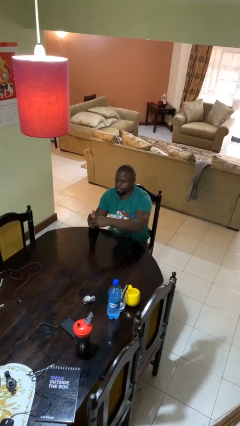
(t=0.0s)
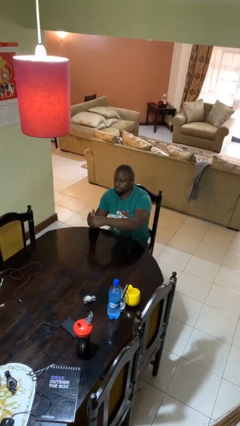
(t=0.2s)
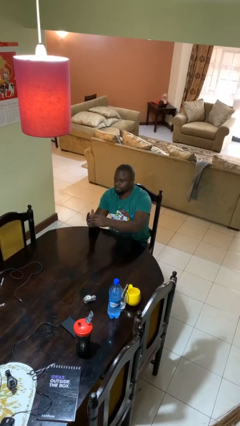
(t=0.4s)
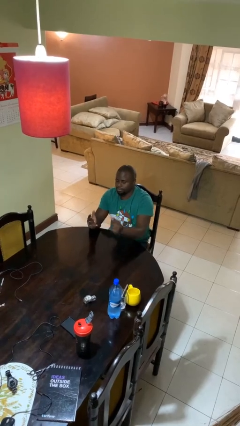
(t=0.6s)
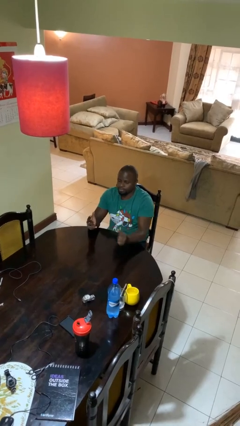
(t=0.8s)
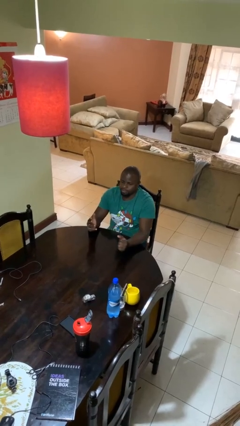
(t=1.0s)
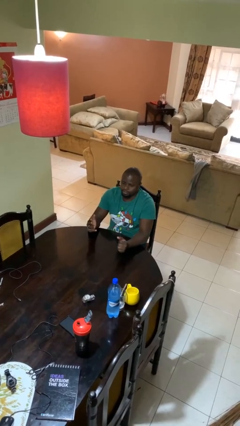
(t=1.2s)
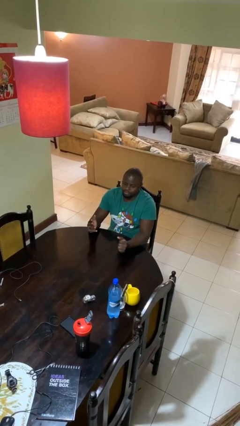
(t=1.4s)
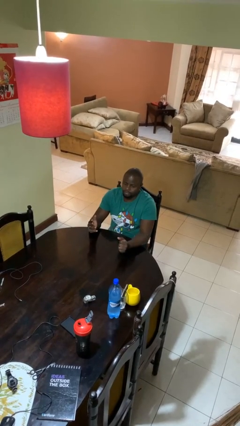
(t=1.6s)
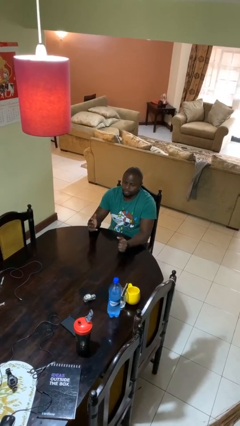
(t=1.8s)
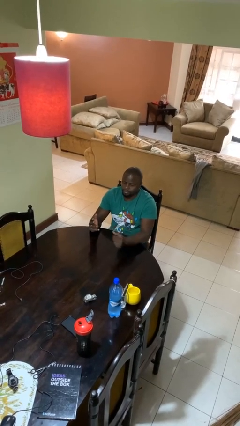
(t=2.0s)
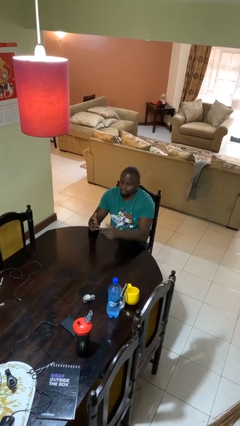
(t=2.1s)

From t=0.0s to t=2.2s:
person puts on ring

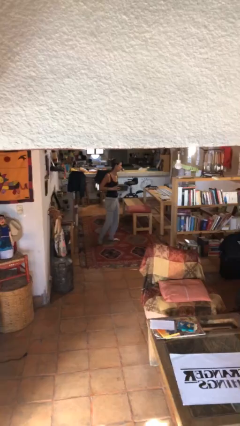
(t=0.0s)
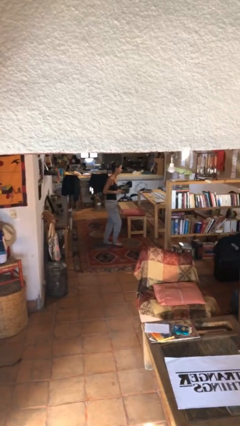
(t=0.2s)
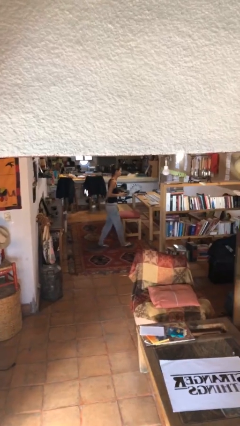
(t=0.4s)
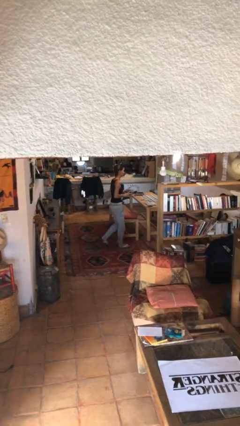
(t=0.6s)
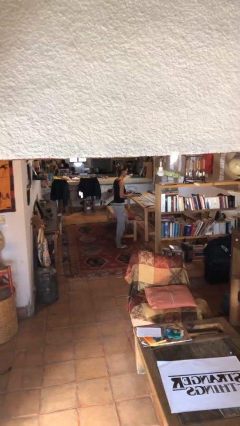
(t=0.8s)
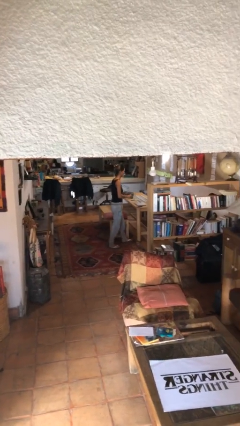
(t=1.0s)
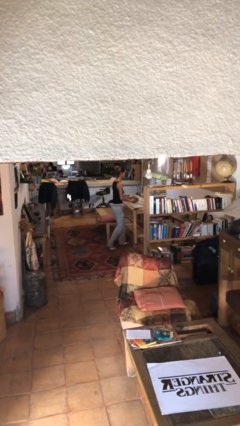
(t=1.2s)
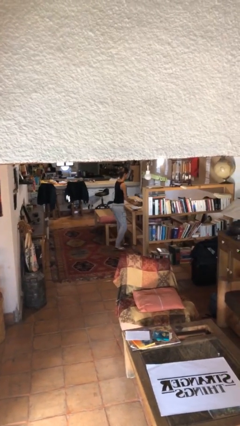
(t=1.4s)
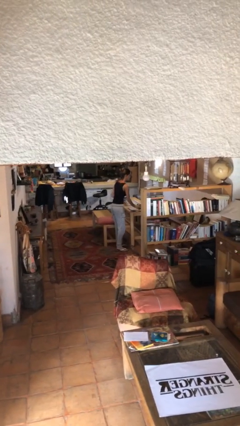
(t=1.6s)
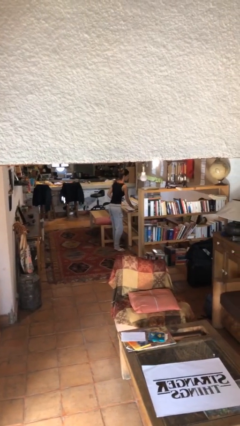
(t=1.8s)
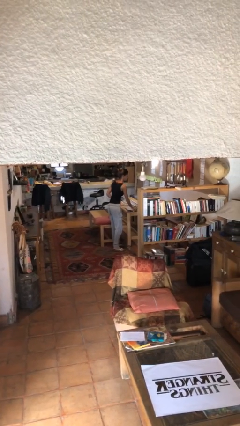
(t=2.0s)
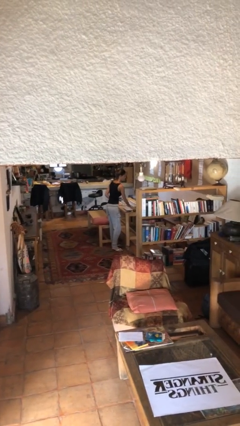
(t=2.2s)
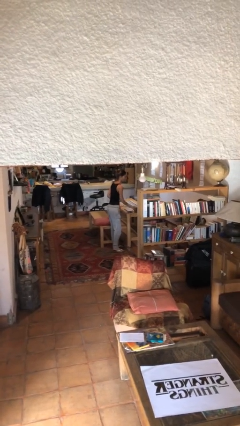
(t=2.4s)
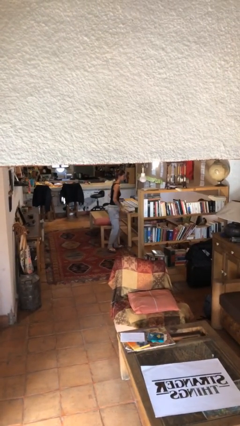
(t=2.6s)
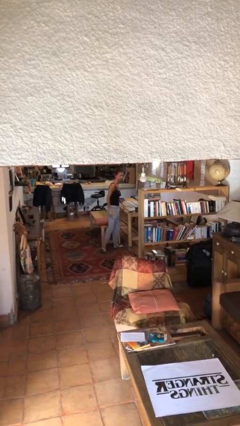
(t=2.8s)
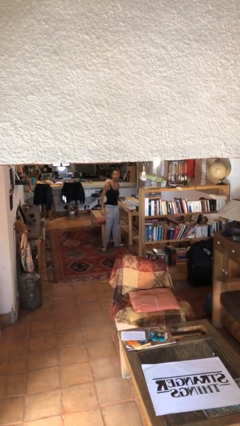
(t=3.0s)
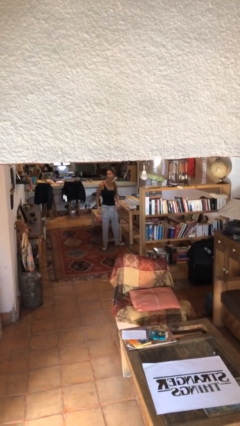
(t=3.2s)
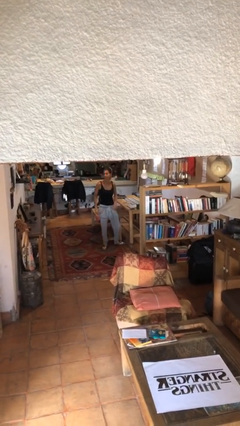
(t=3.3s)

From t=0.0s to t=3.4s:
person puts down object on table

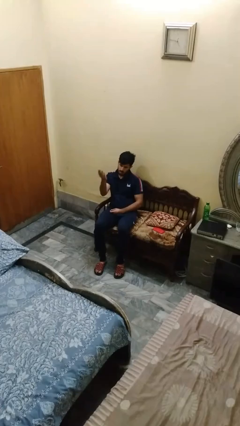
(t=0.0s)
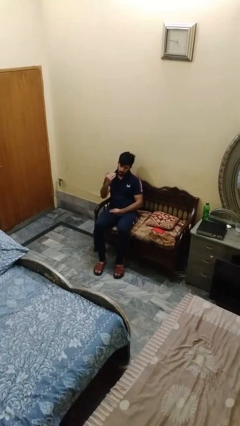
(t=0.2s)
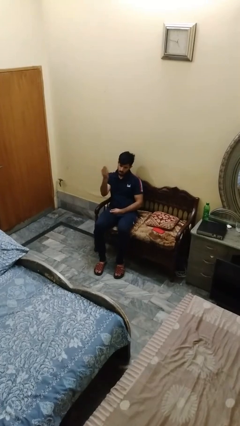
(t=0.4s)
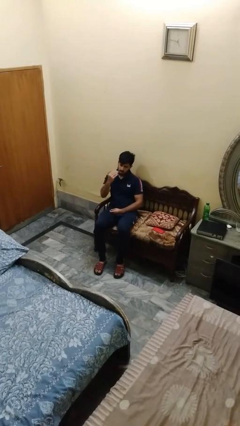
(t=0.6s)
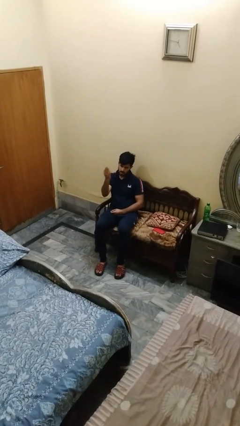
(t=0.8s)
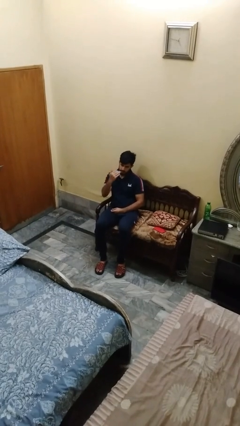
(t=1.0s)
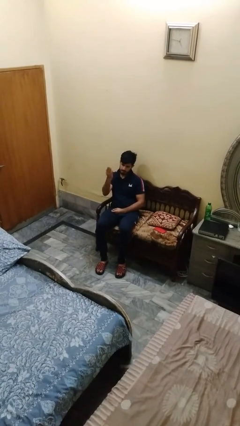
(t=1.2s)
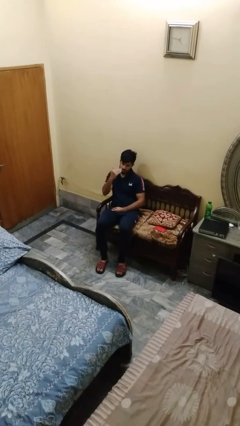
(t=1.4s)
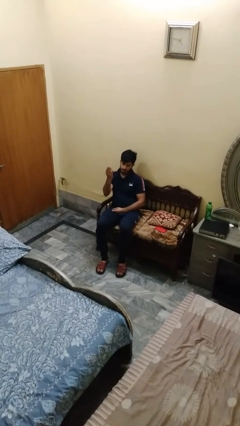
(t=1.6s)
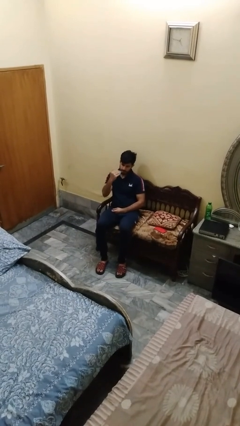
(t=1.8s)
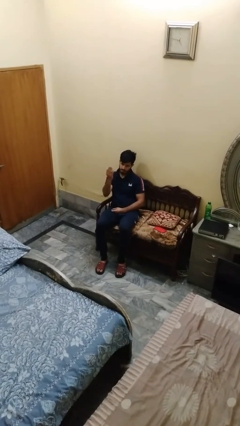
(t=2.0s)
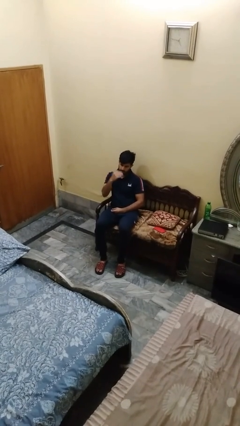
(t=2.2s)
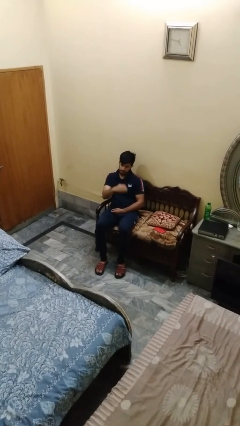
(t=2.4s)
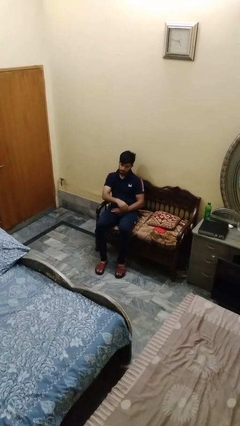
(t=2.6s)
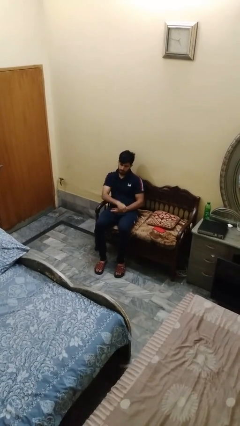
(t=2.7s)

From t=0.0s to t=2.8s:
person gestures come here

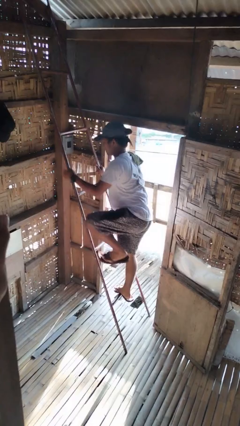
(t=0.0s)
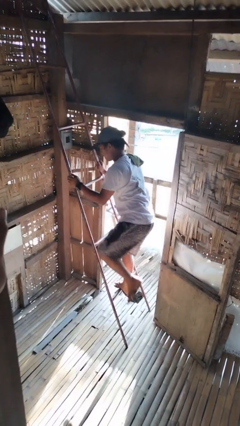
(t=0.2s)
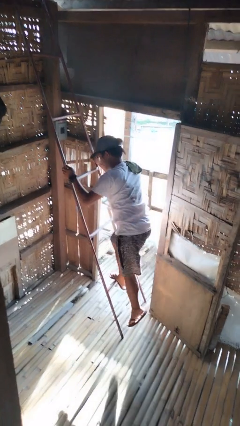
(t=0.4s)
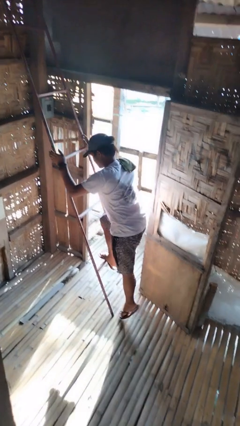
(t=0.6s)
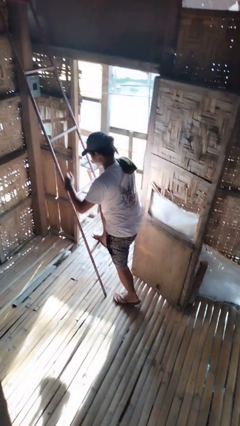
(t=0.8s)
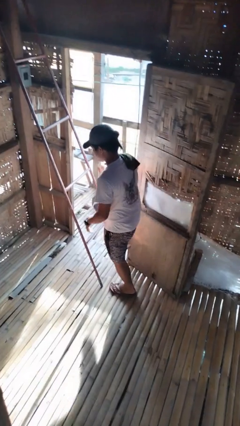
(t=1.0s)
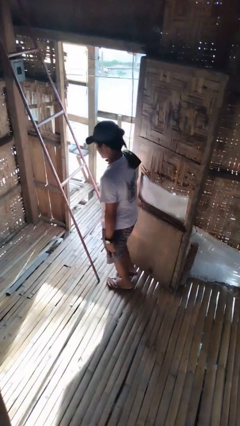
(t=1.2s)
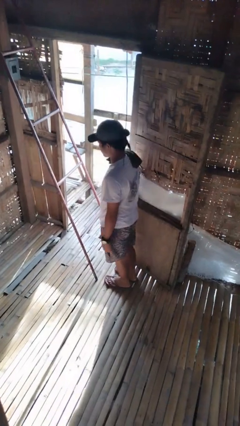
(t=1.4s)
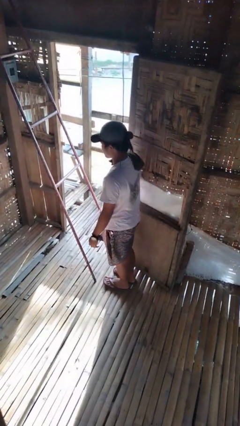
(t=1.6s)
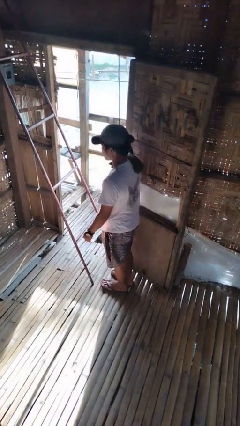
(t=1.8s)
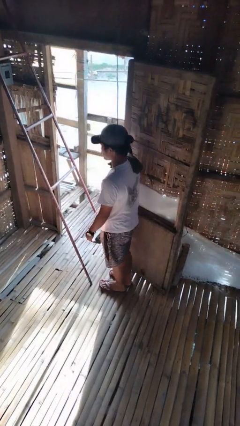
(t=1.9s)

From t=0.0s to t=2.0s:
person climbs down ladder

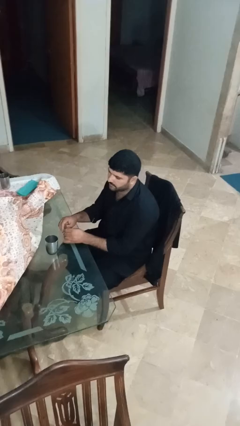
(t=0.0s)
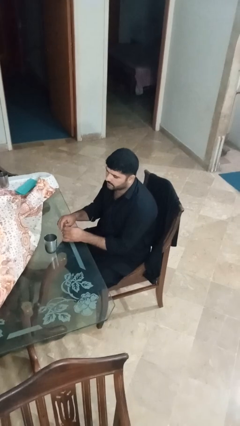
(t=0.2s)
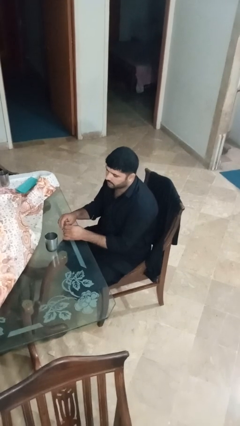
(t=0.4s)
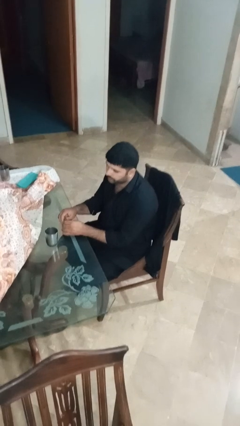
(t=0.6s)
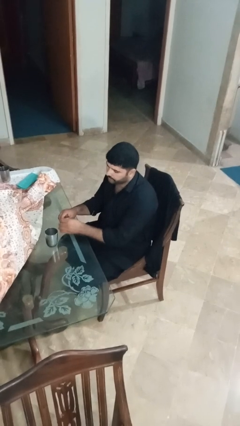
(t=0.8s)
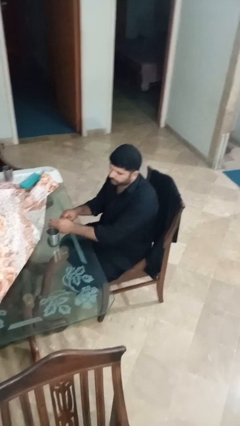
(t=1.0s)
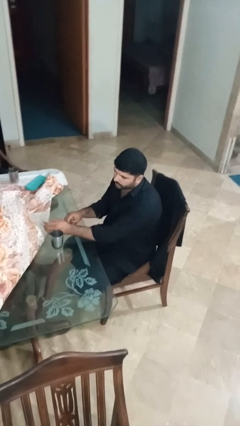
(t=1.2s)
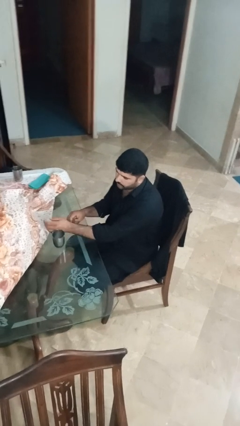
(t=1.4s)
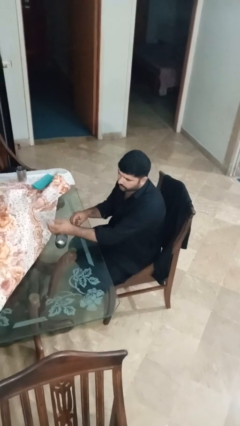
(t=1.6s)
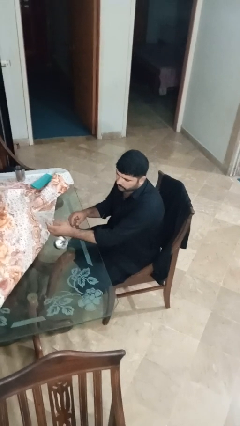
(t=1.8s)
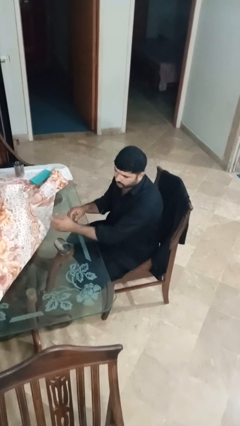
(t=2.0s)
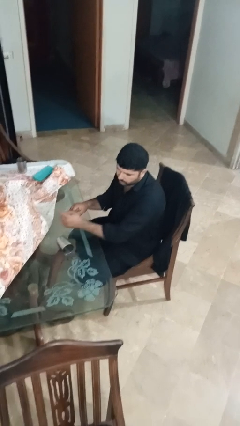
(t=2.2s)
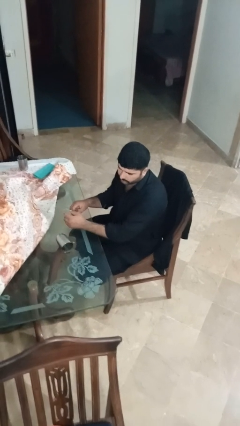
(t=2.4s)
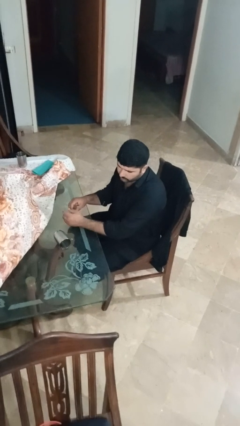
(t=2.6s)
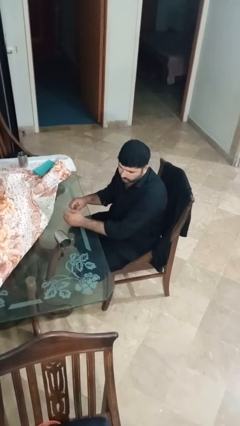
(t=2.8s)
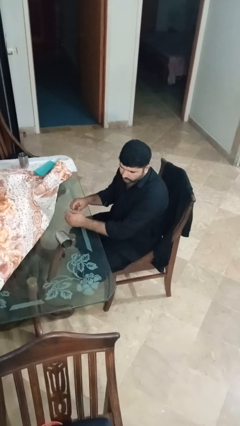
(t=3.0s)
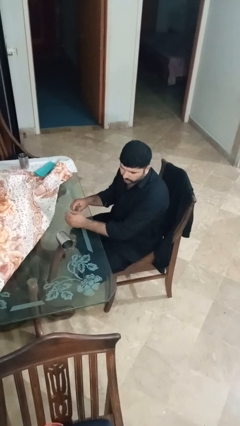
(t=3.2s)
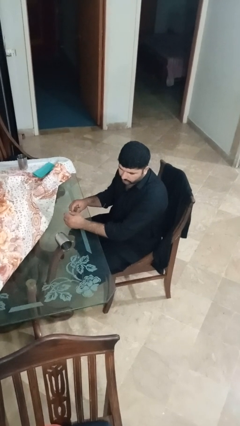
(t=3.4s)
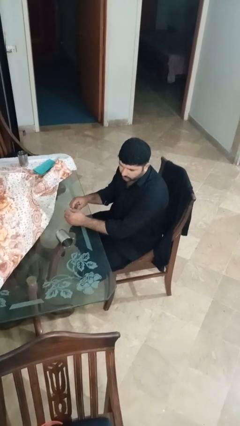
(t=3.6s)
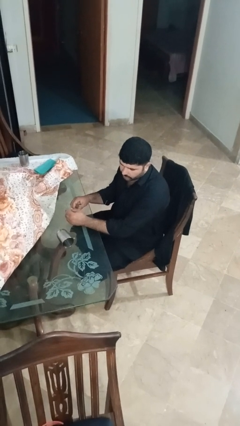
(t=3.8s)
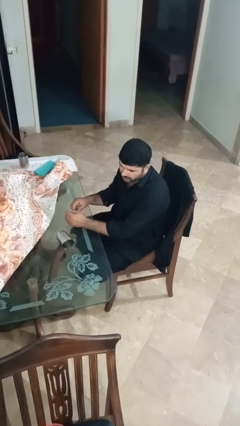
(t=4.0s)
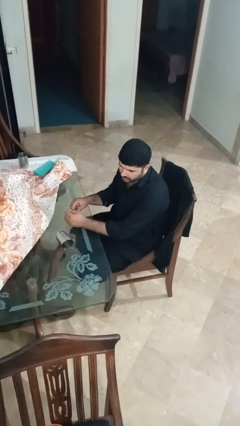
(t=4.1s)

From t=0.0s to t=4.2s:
person spills on table

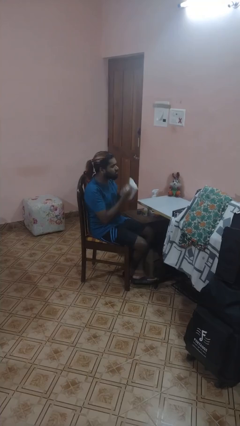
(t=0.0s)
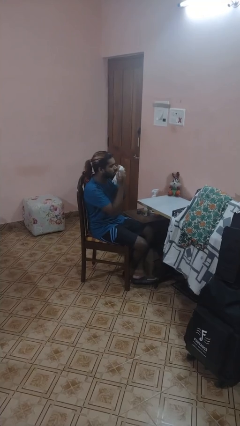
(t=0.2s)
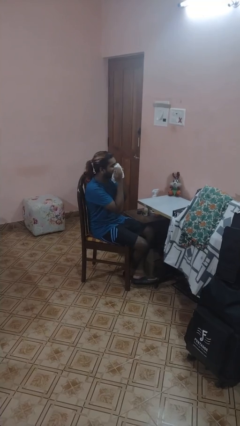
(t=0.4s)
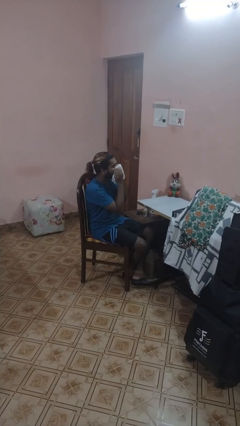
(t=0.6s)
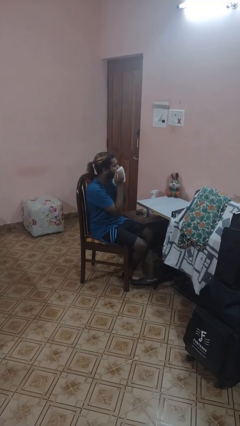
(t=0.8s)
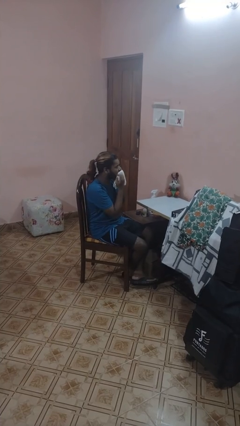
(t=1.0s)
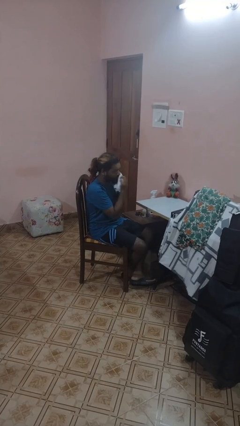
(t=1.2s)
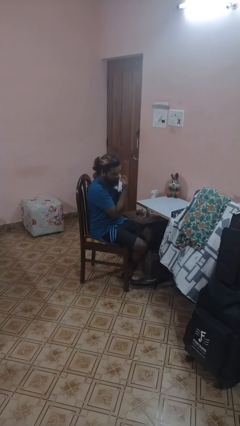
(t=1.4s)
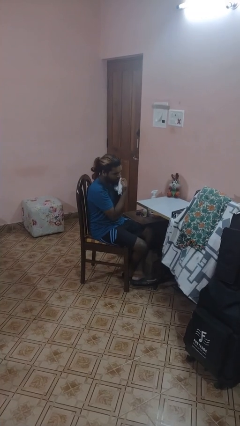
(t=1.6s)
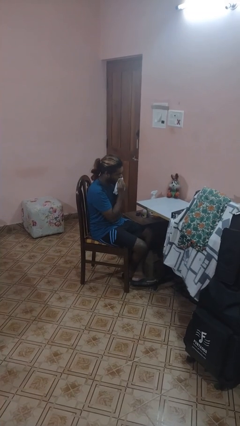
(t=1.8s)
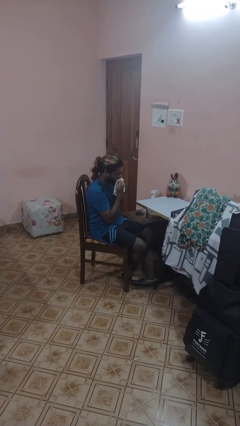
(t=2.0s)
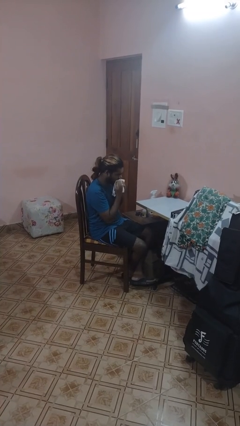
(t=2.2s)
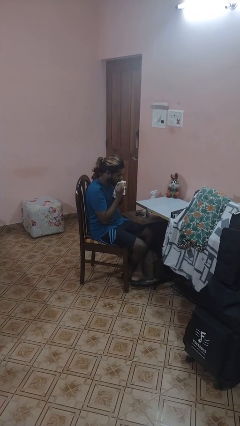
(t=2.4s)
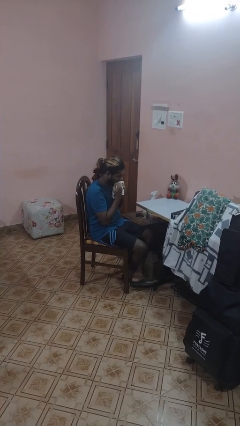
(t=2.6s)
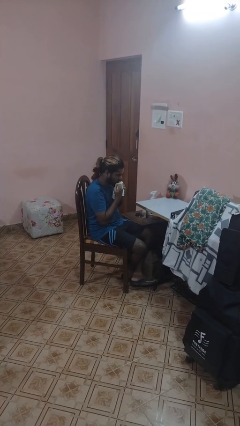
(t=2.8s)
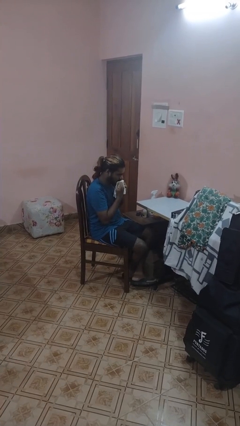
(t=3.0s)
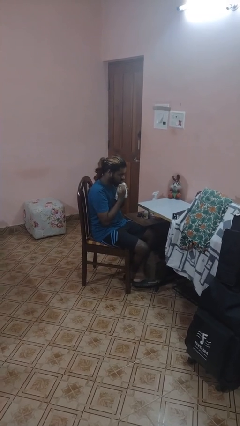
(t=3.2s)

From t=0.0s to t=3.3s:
person wipes mouth with napkin
